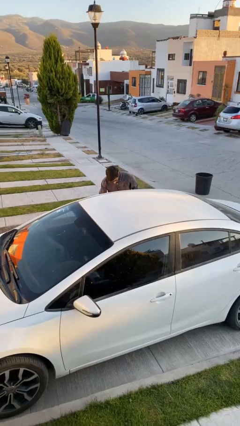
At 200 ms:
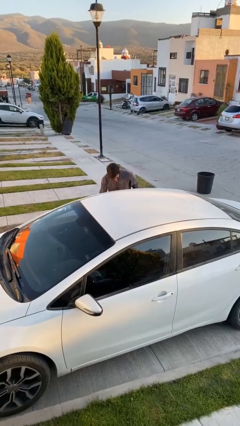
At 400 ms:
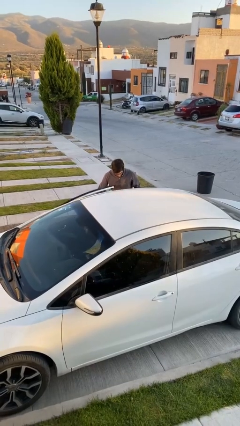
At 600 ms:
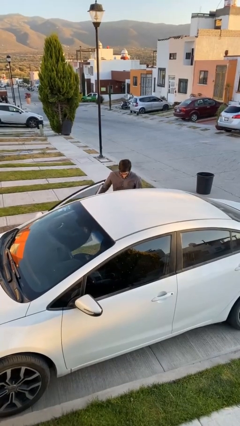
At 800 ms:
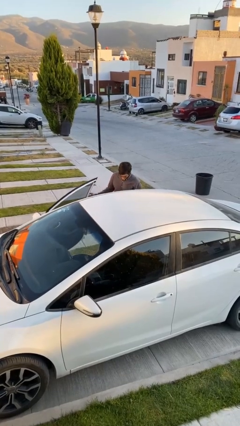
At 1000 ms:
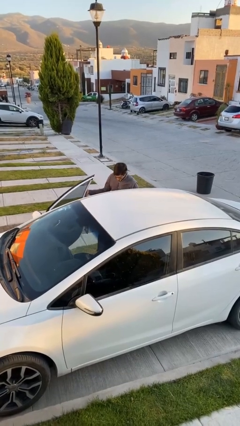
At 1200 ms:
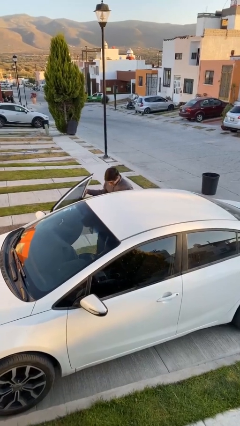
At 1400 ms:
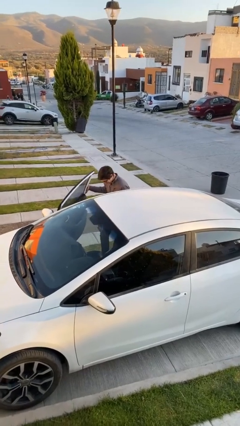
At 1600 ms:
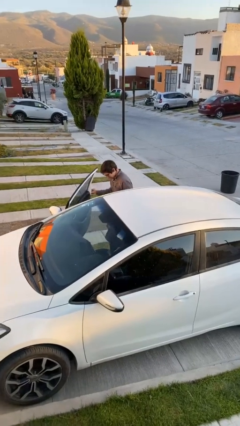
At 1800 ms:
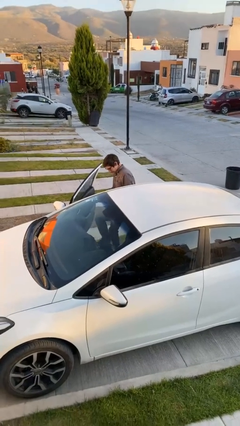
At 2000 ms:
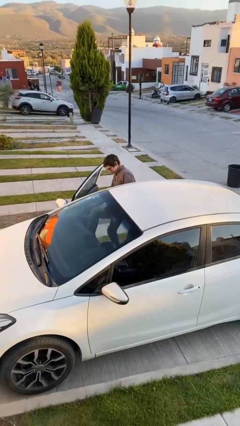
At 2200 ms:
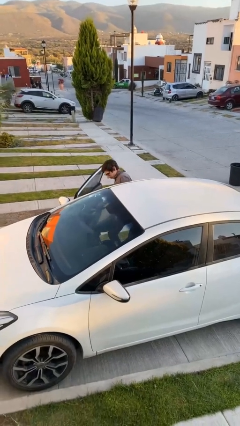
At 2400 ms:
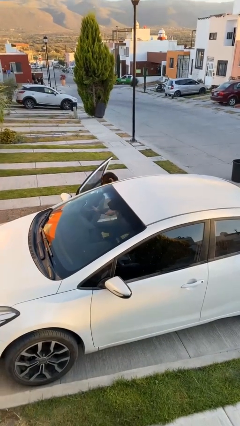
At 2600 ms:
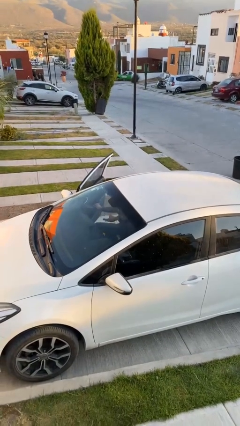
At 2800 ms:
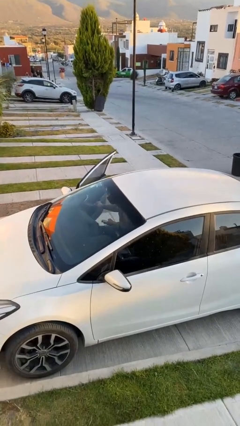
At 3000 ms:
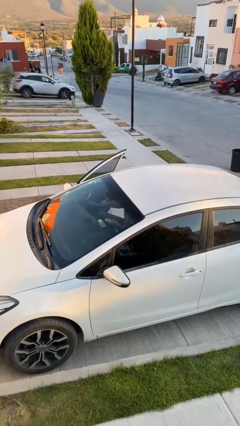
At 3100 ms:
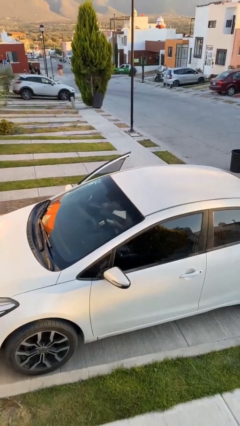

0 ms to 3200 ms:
car picks up person

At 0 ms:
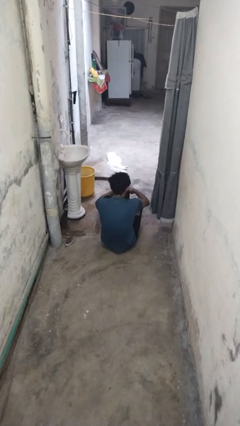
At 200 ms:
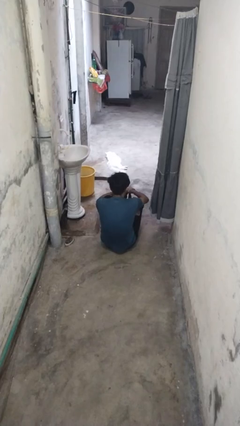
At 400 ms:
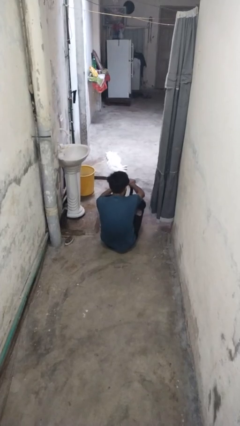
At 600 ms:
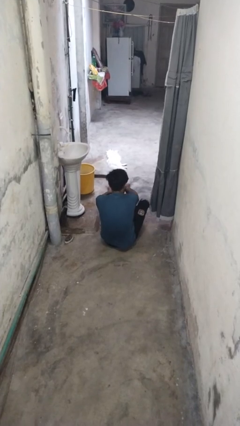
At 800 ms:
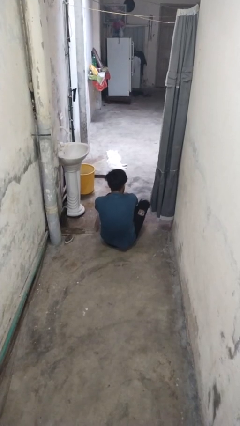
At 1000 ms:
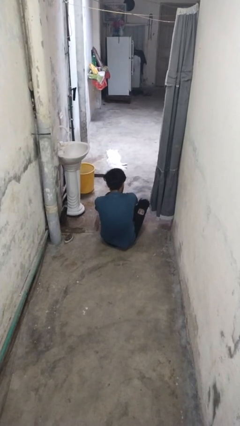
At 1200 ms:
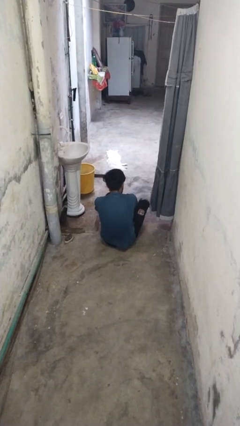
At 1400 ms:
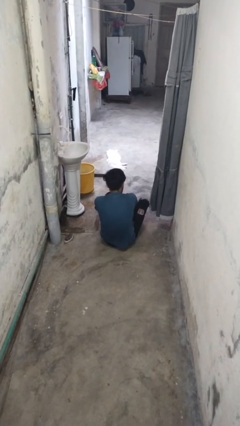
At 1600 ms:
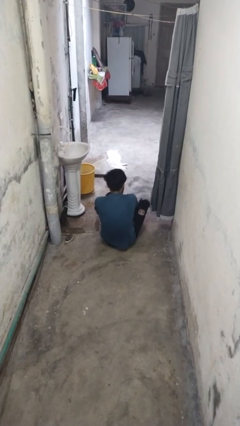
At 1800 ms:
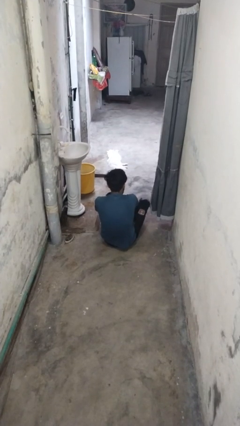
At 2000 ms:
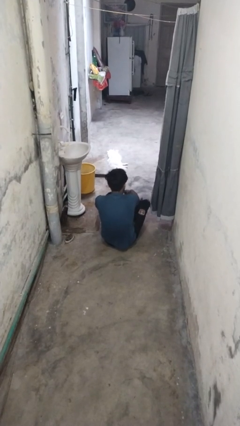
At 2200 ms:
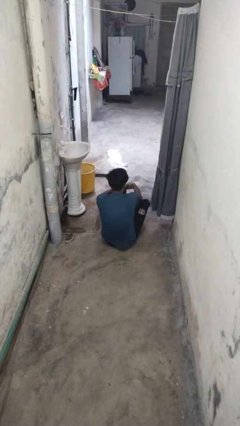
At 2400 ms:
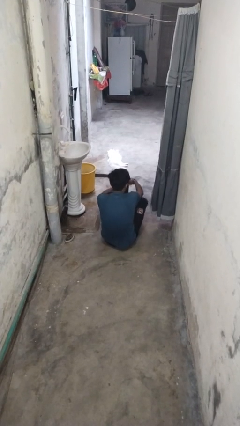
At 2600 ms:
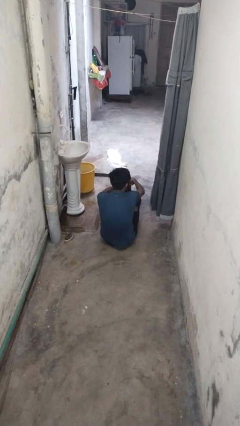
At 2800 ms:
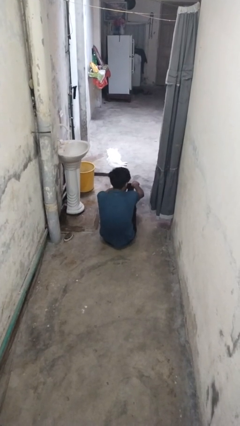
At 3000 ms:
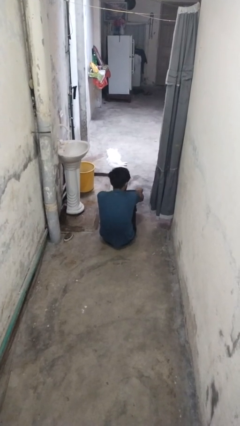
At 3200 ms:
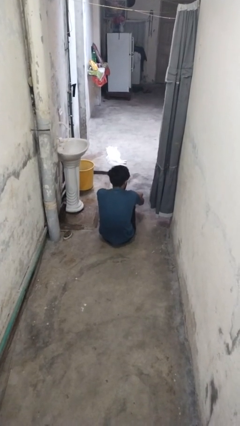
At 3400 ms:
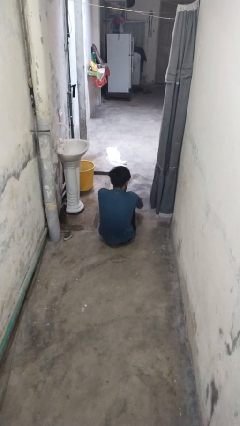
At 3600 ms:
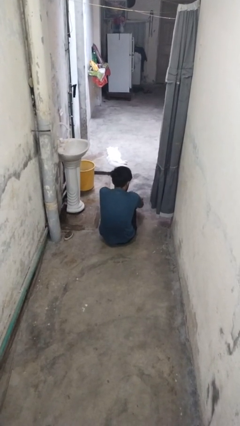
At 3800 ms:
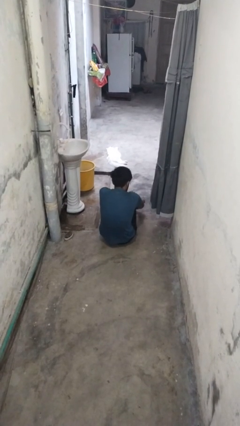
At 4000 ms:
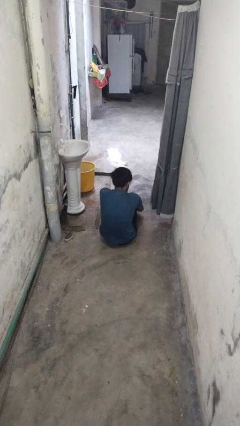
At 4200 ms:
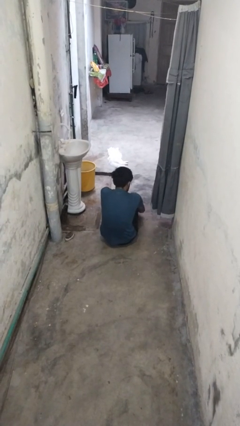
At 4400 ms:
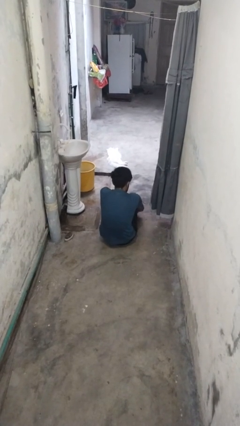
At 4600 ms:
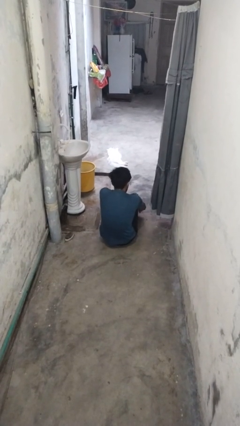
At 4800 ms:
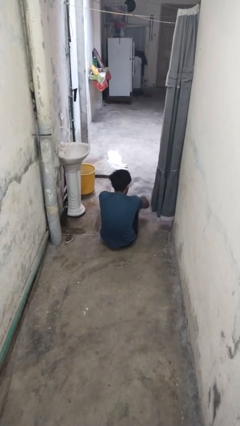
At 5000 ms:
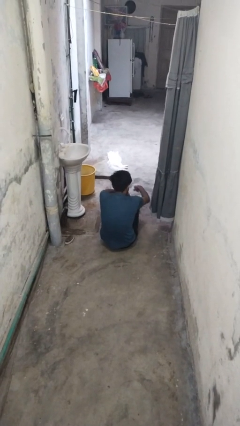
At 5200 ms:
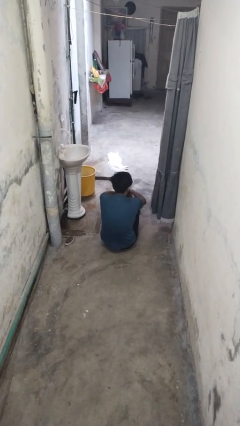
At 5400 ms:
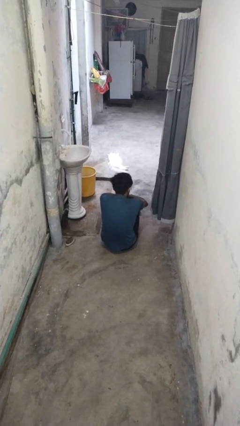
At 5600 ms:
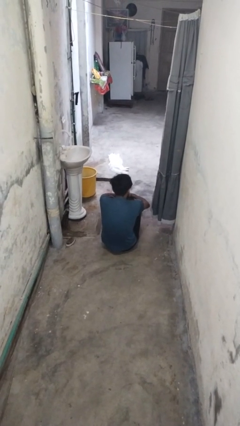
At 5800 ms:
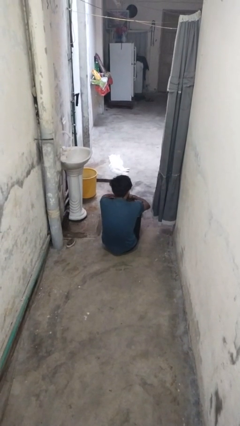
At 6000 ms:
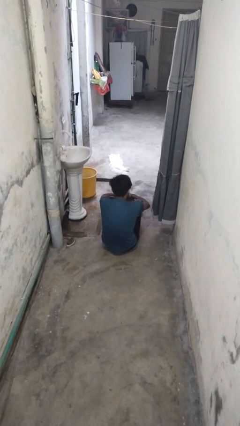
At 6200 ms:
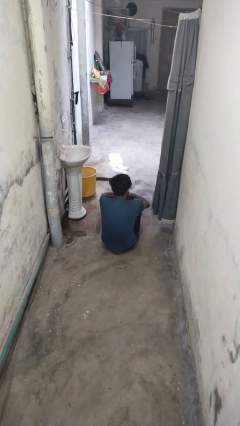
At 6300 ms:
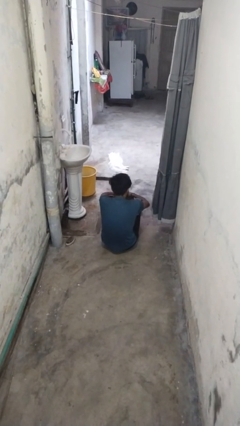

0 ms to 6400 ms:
person puts on socks

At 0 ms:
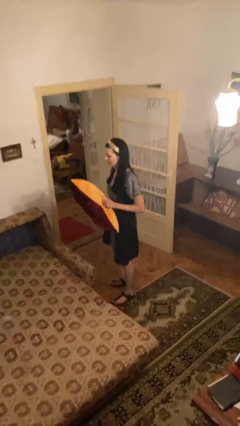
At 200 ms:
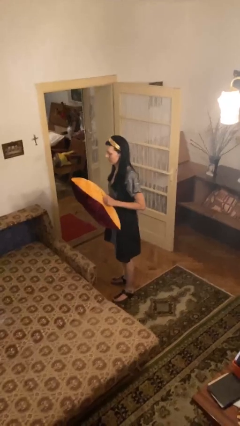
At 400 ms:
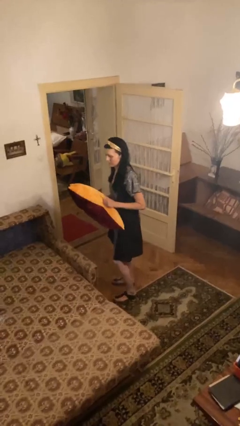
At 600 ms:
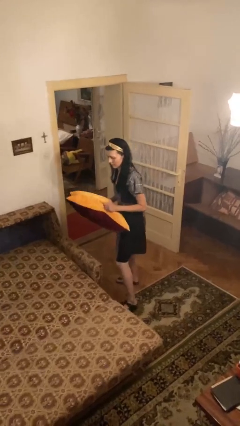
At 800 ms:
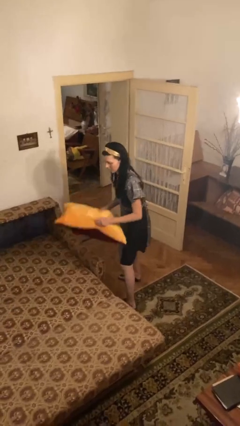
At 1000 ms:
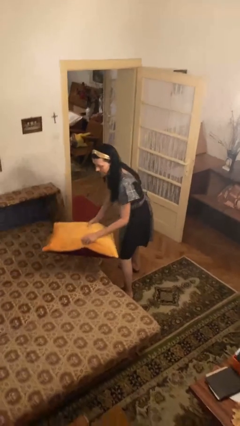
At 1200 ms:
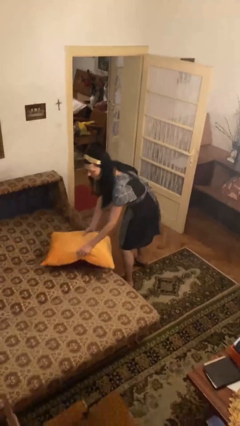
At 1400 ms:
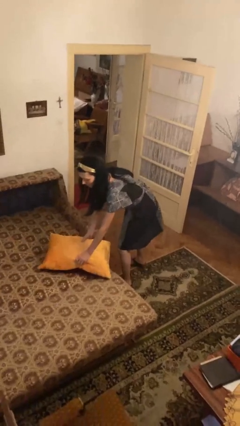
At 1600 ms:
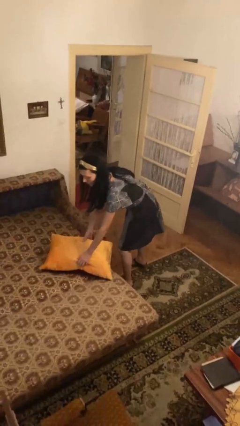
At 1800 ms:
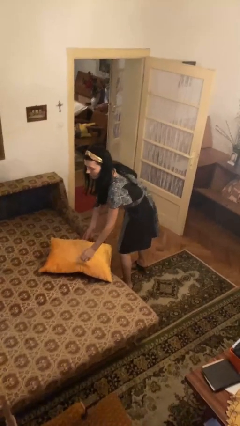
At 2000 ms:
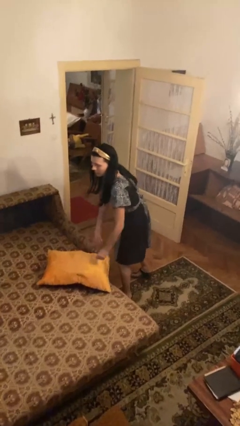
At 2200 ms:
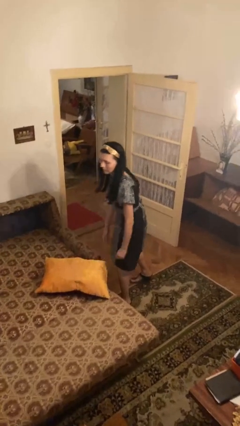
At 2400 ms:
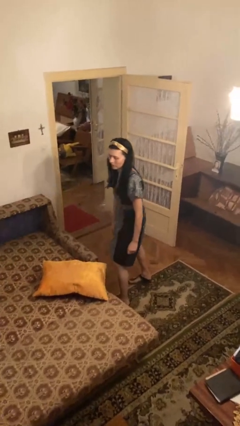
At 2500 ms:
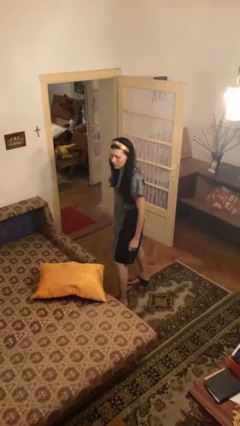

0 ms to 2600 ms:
person puts down object on bed

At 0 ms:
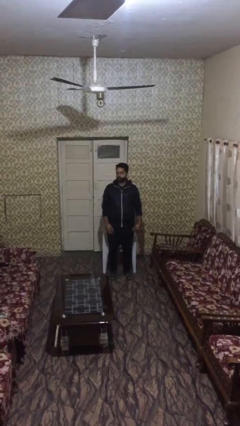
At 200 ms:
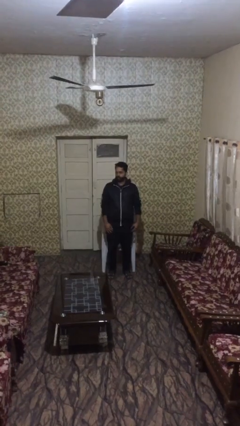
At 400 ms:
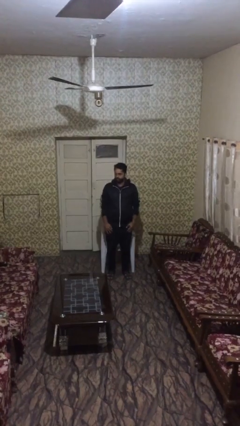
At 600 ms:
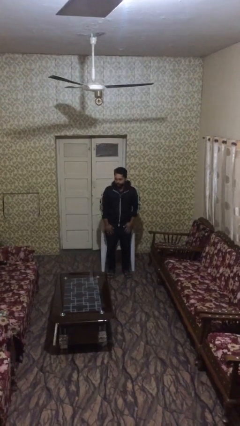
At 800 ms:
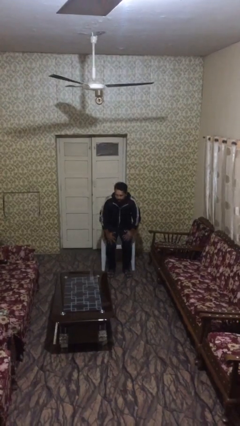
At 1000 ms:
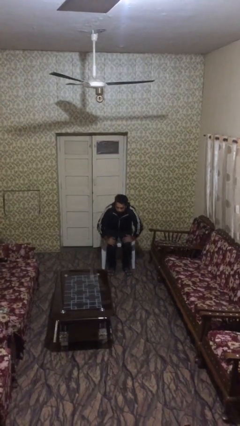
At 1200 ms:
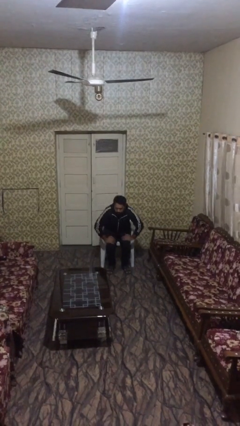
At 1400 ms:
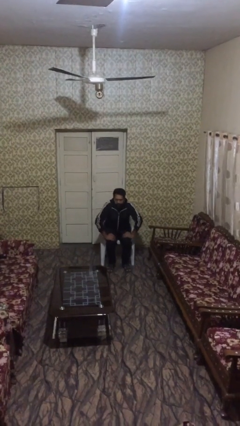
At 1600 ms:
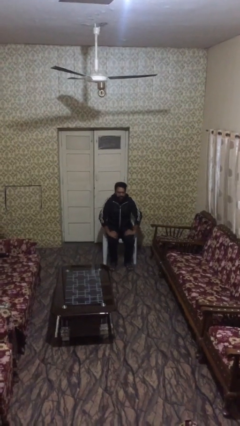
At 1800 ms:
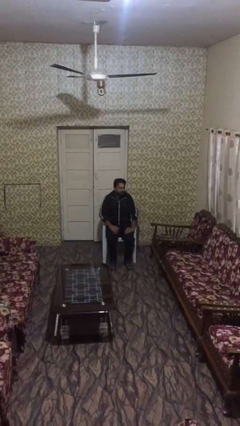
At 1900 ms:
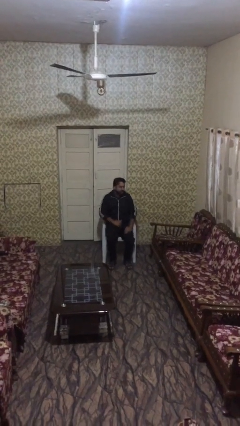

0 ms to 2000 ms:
person sits down

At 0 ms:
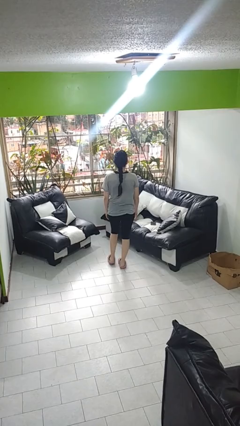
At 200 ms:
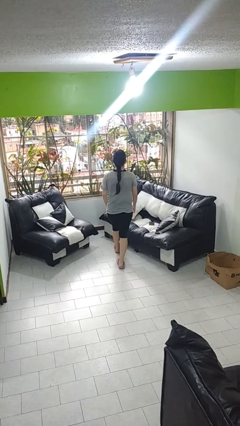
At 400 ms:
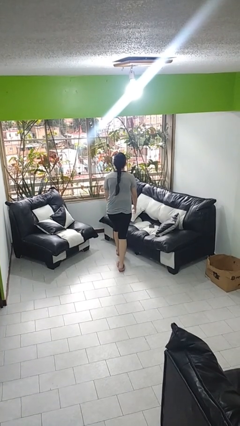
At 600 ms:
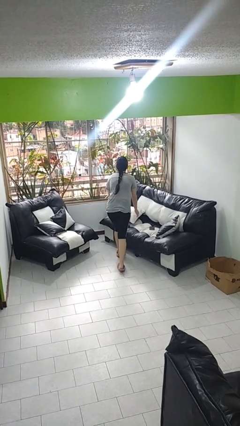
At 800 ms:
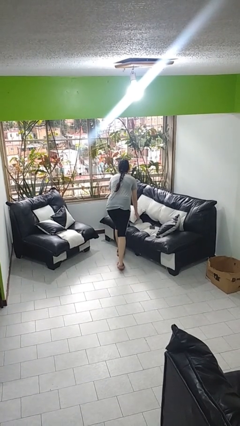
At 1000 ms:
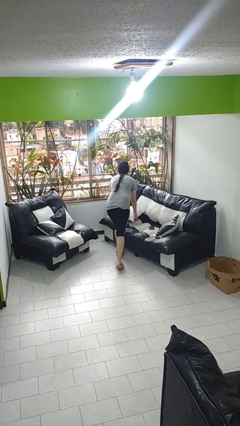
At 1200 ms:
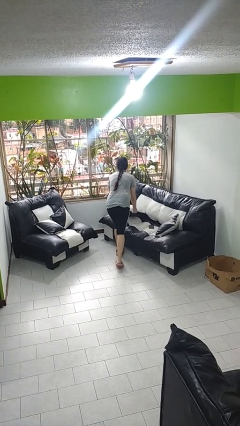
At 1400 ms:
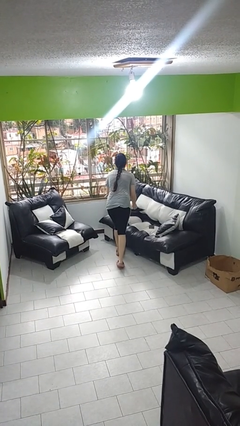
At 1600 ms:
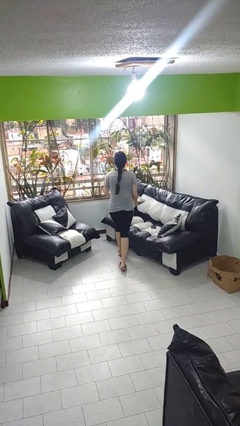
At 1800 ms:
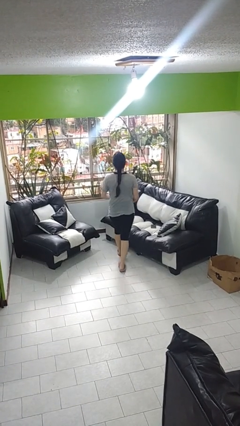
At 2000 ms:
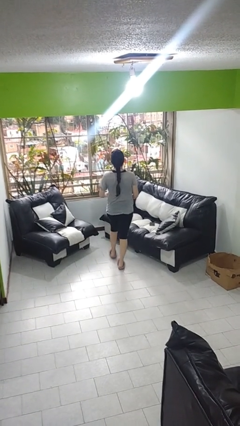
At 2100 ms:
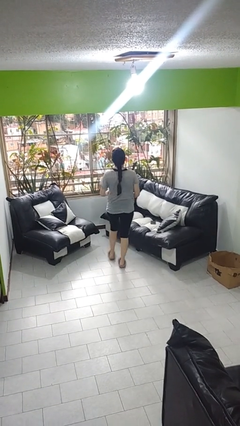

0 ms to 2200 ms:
person picks up object from couch

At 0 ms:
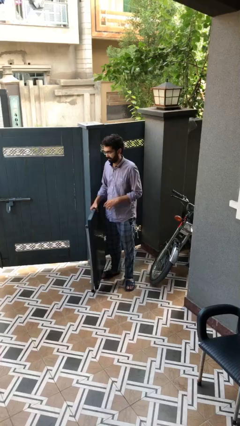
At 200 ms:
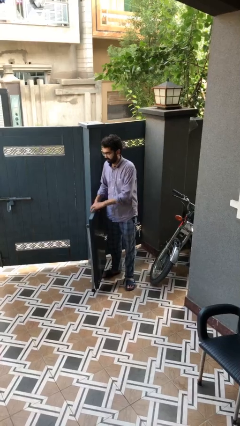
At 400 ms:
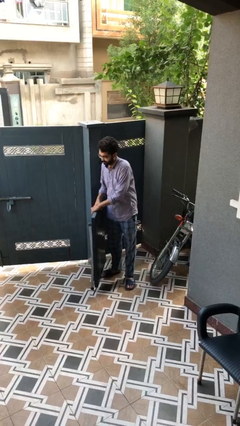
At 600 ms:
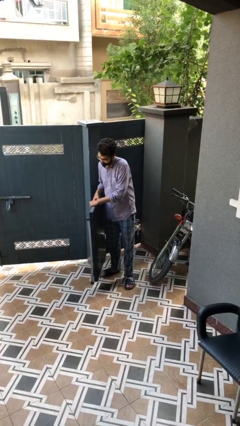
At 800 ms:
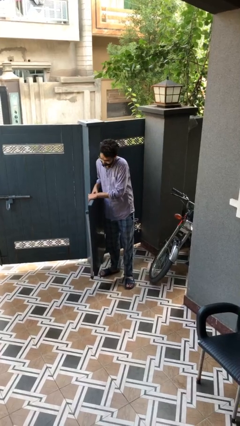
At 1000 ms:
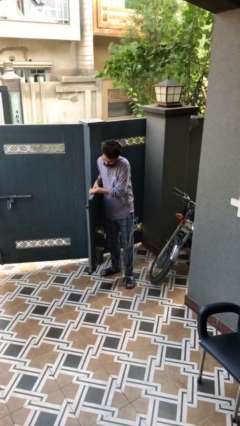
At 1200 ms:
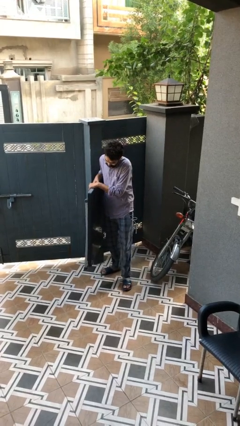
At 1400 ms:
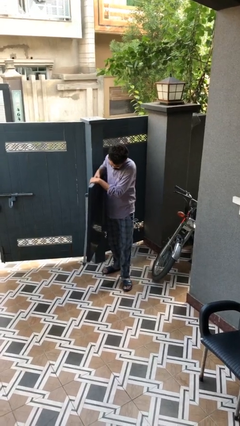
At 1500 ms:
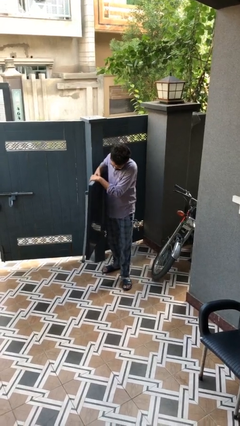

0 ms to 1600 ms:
person picks up object from floor
